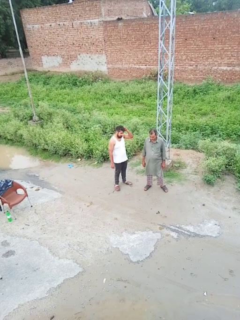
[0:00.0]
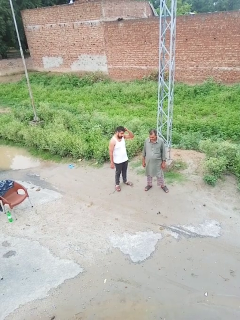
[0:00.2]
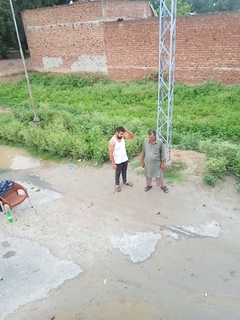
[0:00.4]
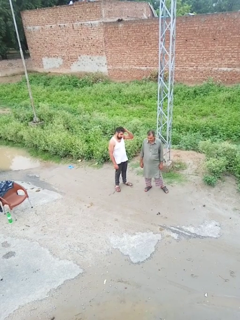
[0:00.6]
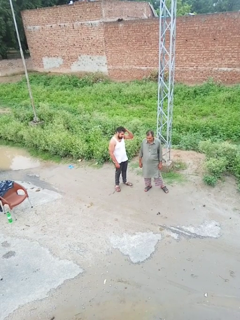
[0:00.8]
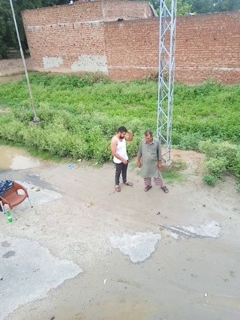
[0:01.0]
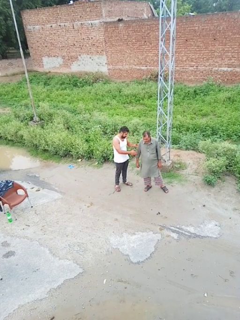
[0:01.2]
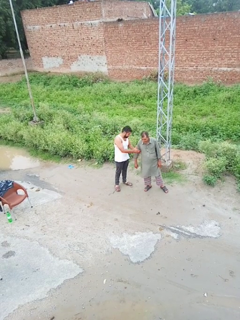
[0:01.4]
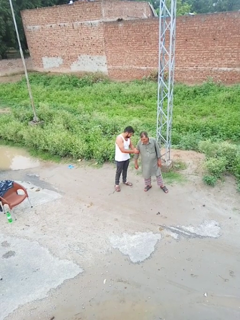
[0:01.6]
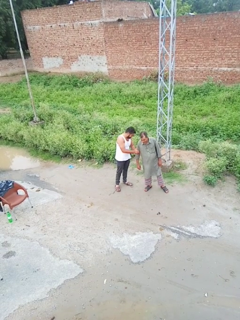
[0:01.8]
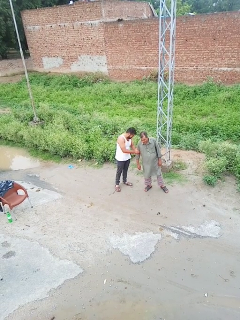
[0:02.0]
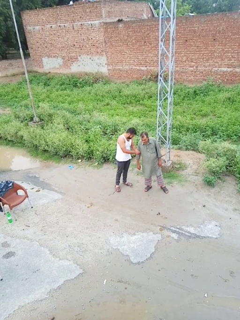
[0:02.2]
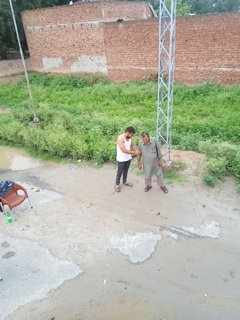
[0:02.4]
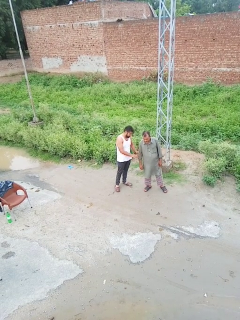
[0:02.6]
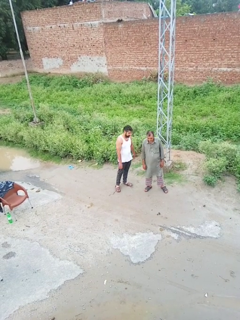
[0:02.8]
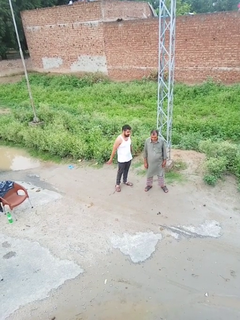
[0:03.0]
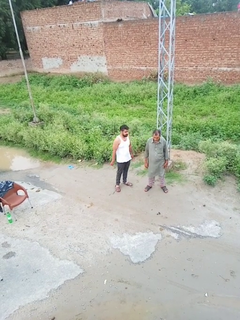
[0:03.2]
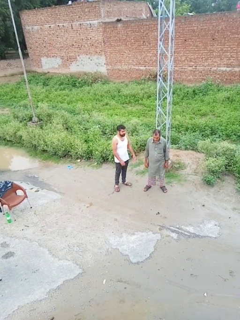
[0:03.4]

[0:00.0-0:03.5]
person grabs person by forearm

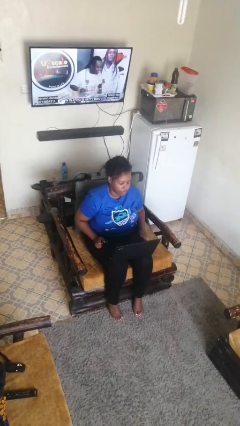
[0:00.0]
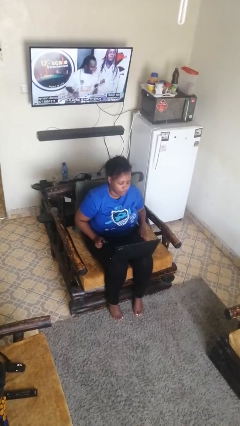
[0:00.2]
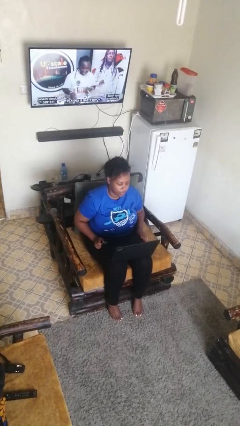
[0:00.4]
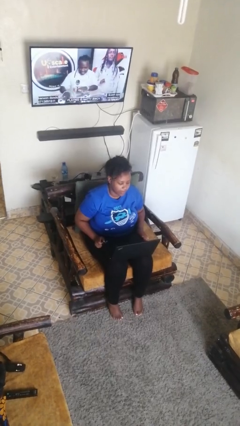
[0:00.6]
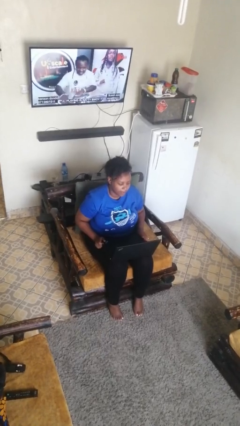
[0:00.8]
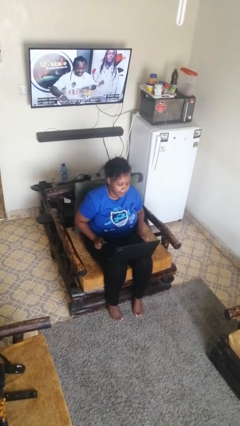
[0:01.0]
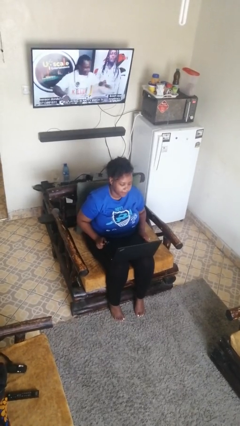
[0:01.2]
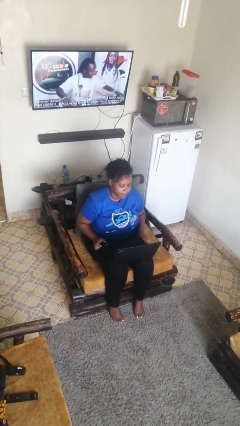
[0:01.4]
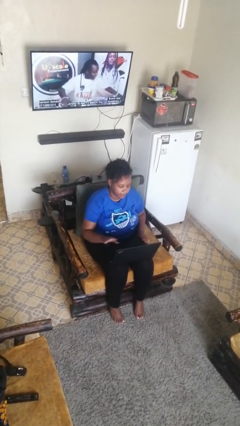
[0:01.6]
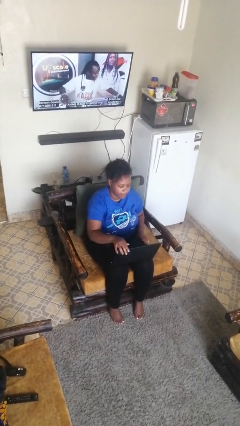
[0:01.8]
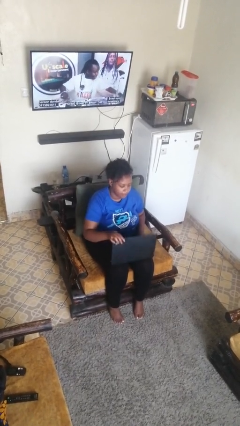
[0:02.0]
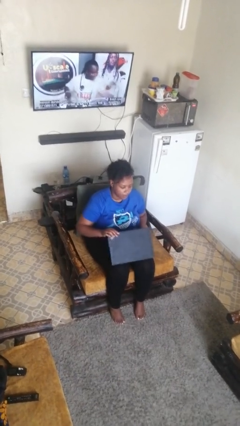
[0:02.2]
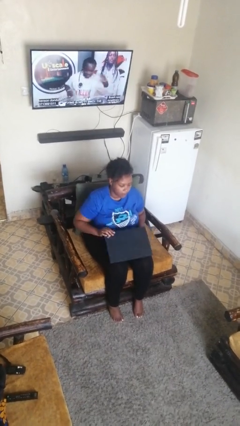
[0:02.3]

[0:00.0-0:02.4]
person opens laptop

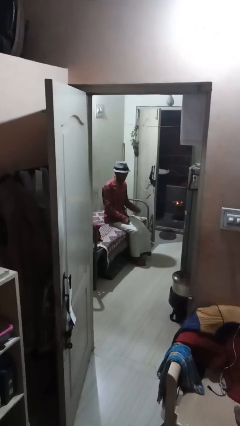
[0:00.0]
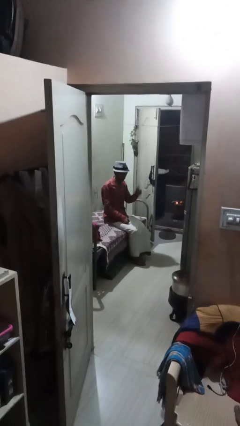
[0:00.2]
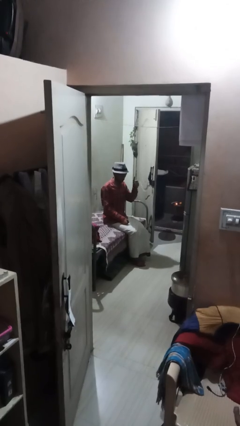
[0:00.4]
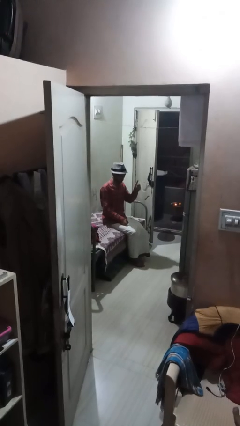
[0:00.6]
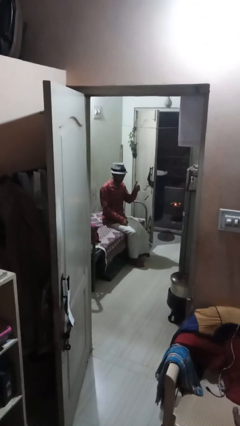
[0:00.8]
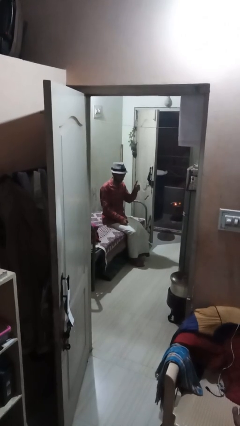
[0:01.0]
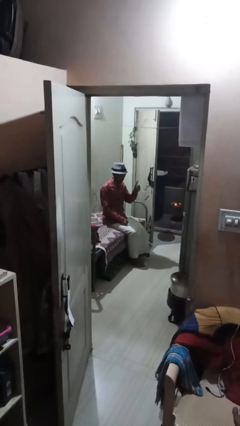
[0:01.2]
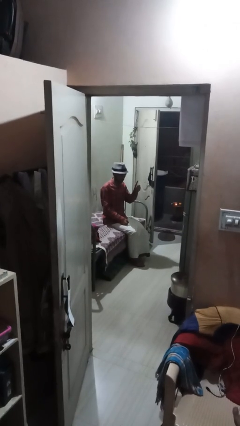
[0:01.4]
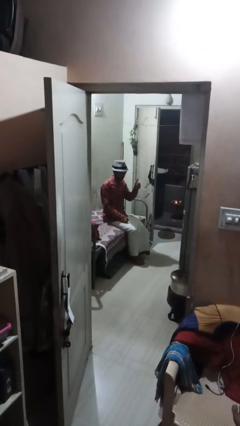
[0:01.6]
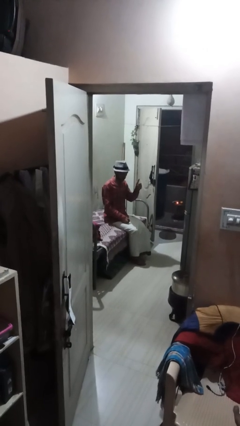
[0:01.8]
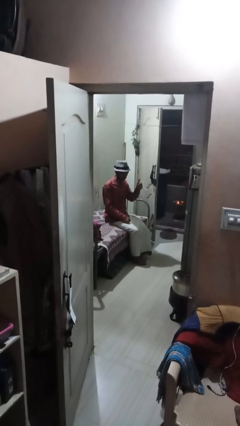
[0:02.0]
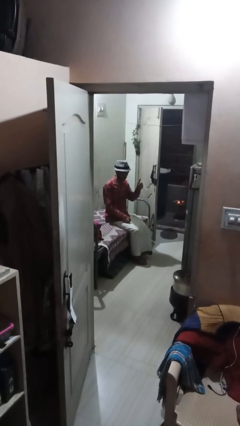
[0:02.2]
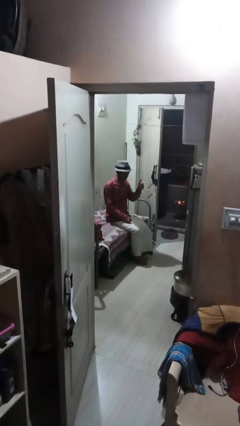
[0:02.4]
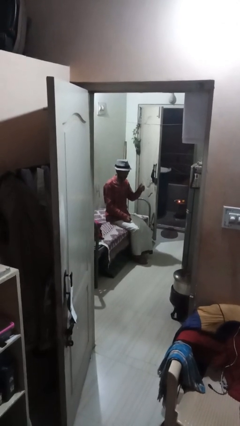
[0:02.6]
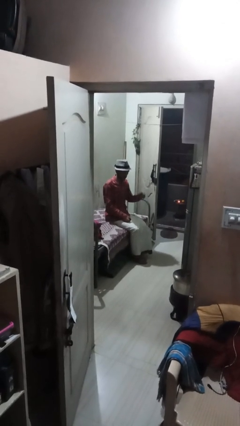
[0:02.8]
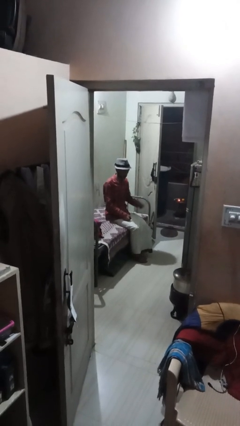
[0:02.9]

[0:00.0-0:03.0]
person gestures thumbs up

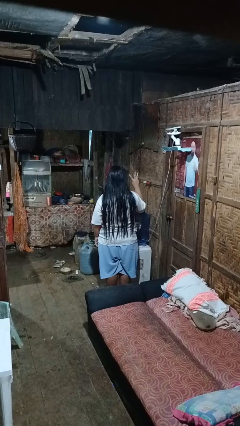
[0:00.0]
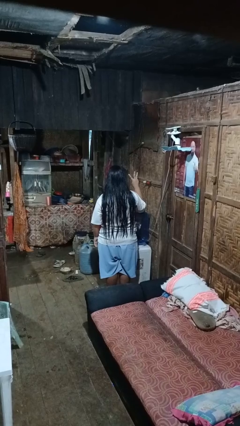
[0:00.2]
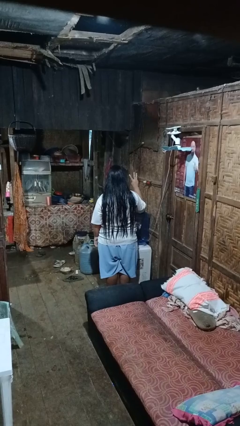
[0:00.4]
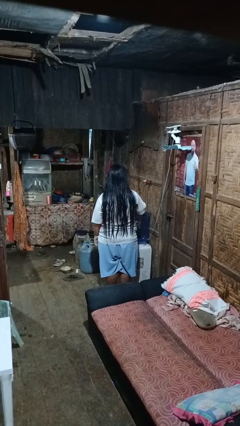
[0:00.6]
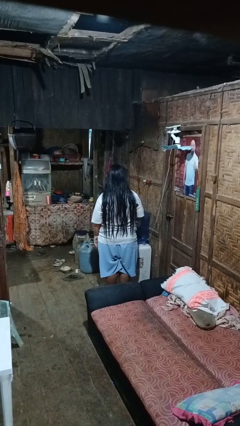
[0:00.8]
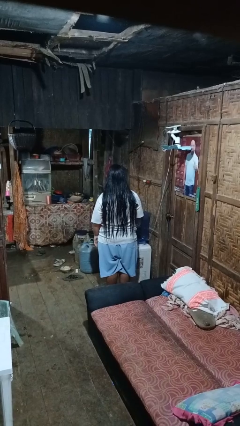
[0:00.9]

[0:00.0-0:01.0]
person gestures number three

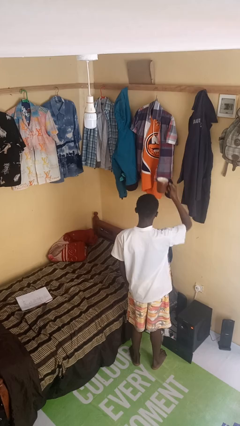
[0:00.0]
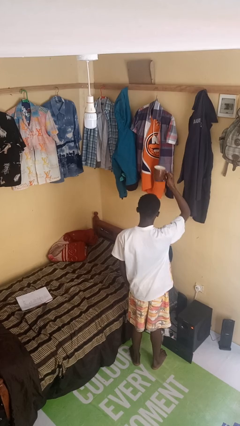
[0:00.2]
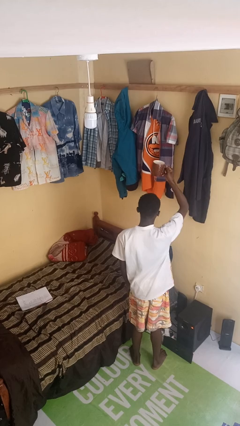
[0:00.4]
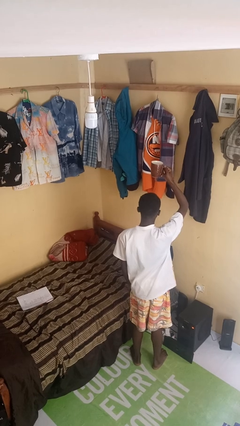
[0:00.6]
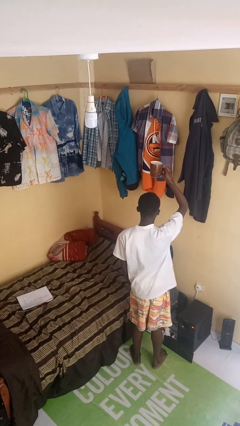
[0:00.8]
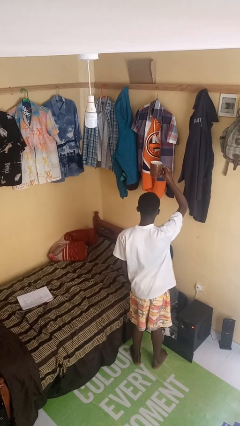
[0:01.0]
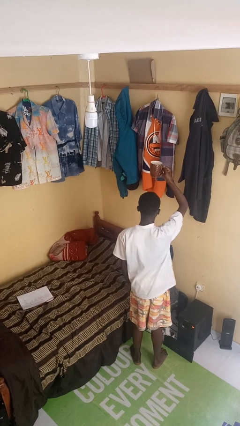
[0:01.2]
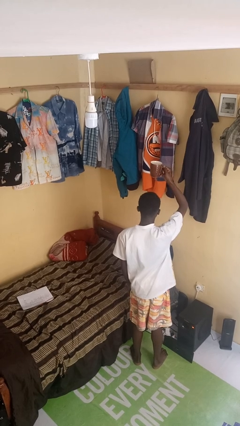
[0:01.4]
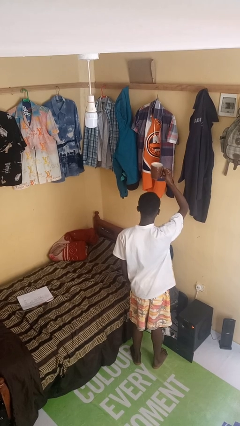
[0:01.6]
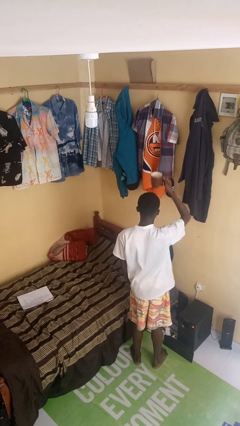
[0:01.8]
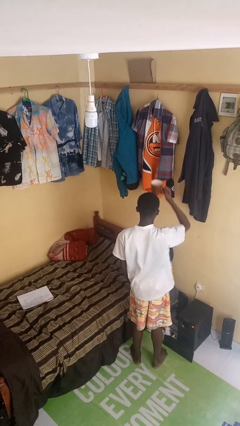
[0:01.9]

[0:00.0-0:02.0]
person holds object above head

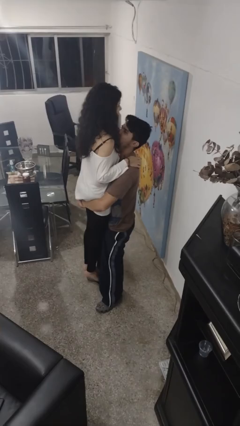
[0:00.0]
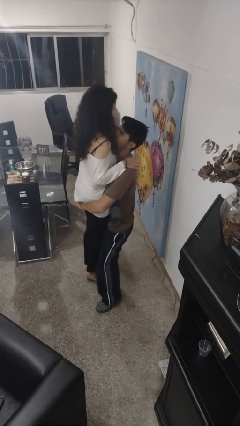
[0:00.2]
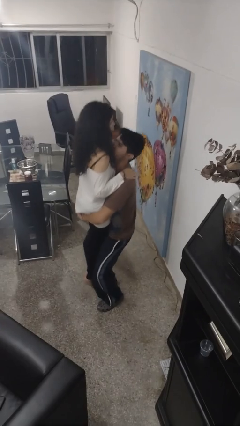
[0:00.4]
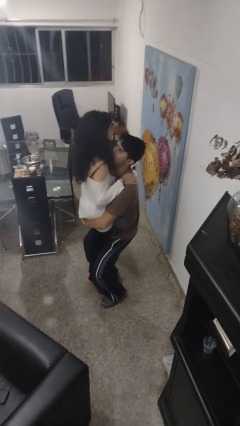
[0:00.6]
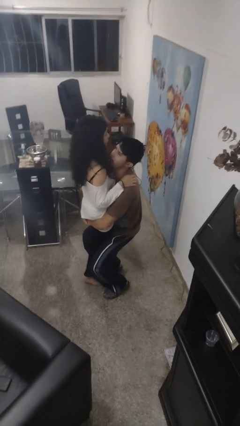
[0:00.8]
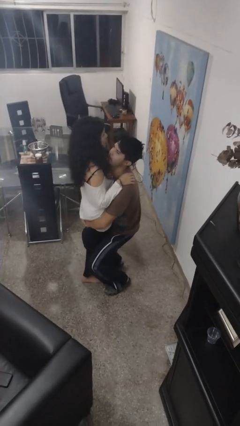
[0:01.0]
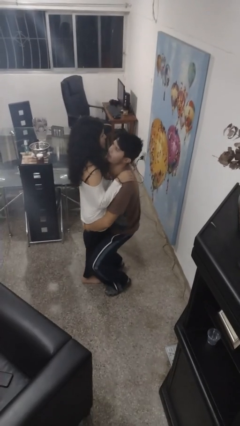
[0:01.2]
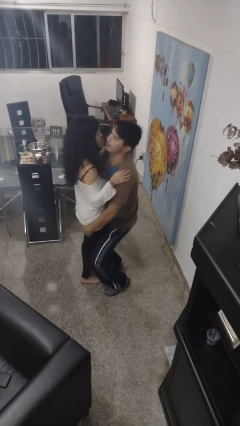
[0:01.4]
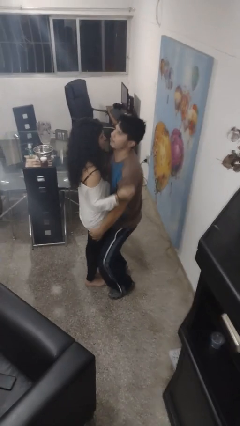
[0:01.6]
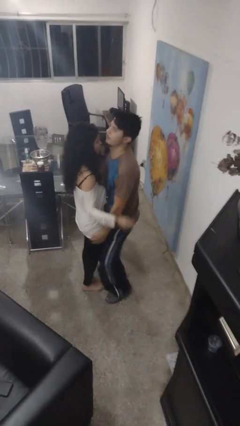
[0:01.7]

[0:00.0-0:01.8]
person puts down person

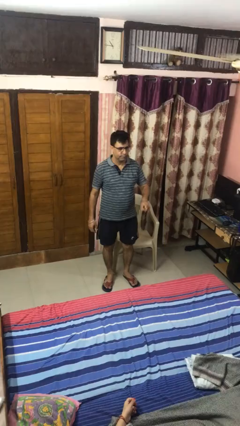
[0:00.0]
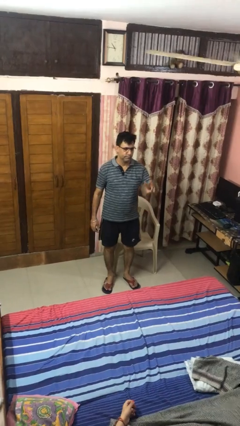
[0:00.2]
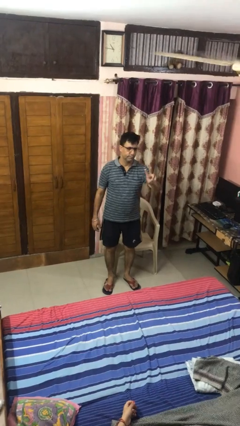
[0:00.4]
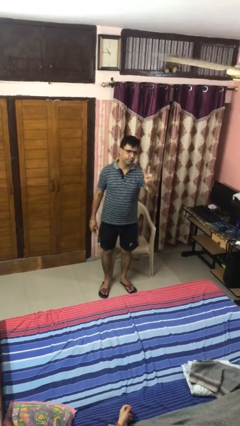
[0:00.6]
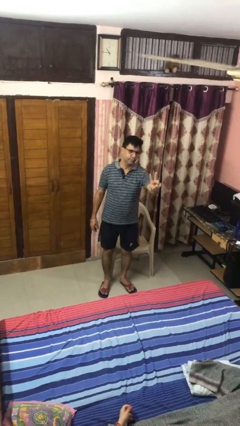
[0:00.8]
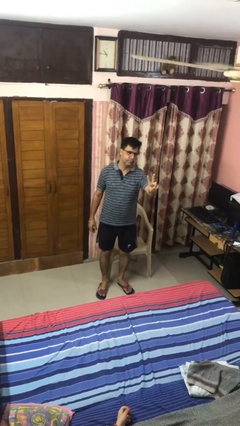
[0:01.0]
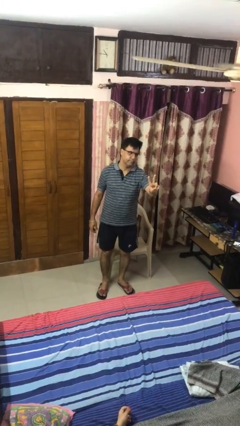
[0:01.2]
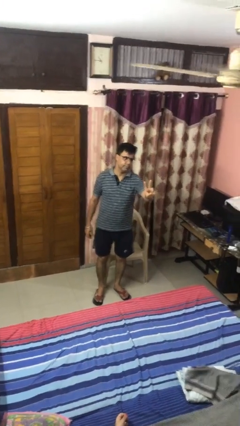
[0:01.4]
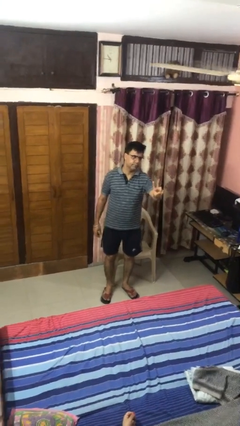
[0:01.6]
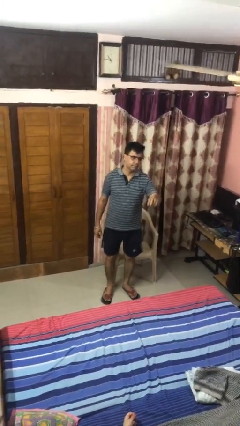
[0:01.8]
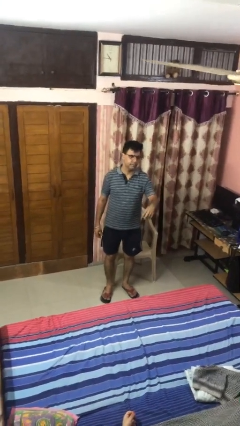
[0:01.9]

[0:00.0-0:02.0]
person gestures peace

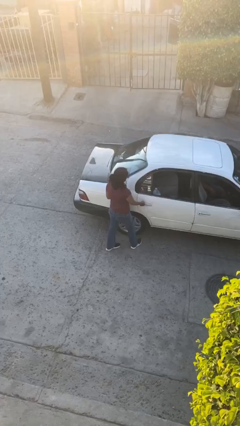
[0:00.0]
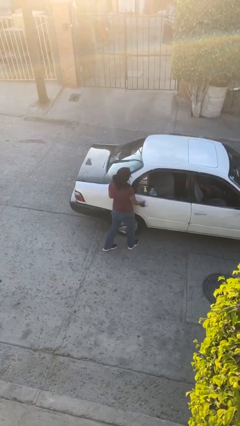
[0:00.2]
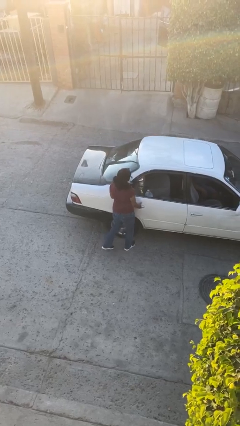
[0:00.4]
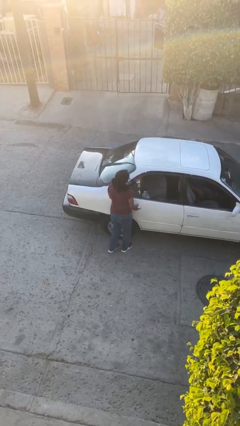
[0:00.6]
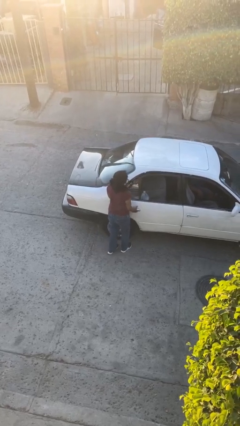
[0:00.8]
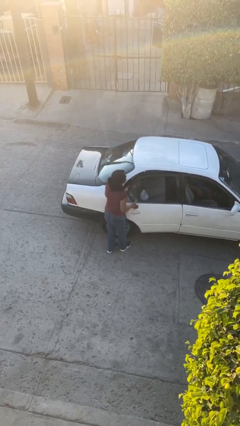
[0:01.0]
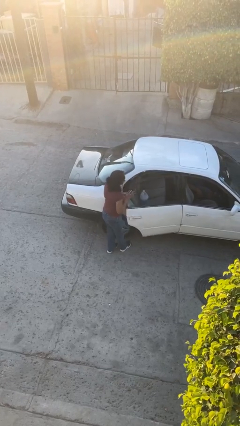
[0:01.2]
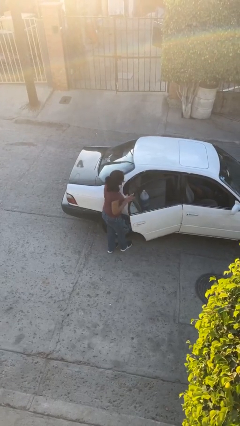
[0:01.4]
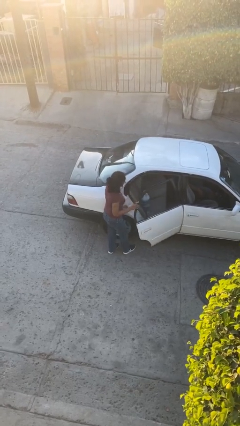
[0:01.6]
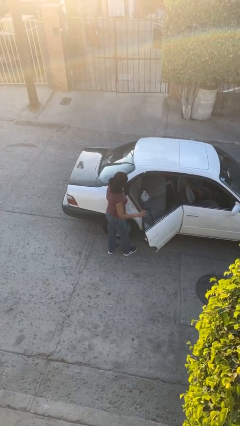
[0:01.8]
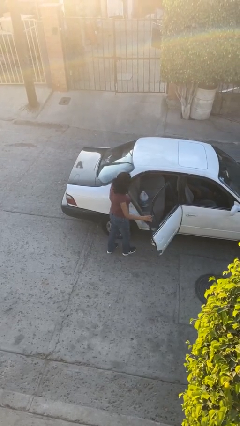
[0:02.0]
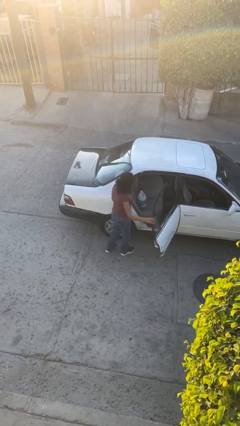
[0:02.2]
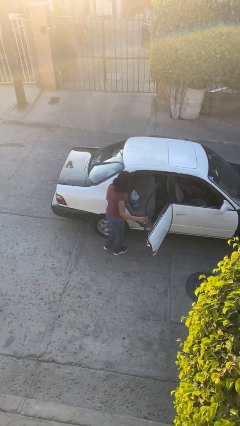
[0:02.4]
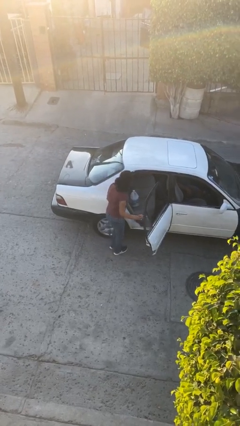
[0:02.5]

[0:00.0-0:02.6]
person opens car door
